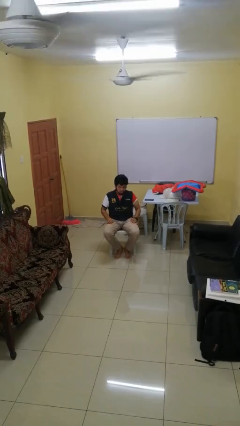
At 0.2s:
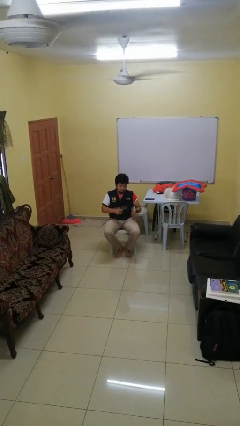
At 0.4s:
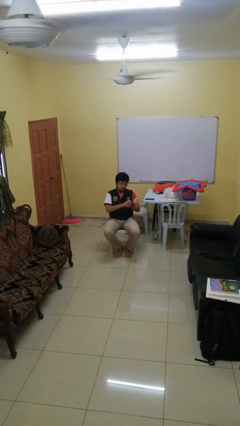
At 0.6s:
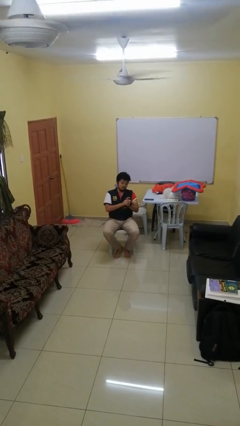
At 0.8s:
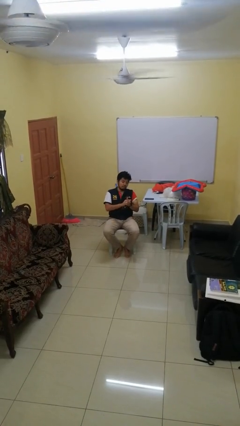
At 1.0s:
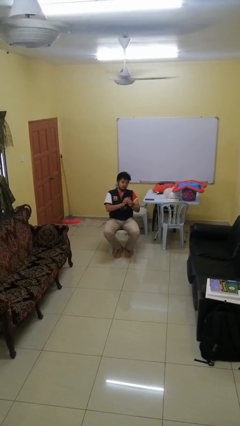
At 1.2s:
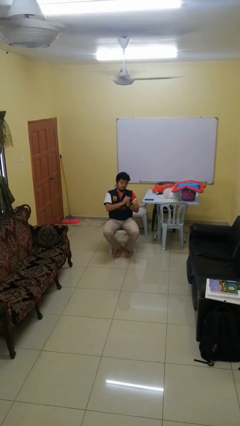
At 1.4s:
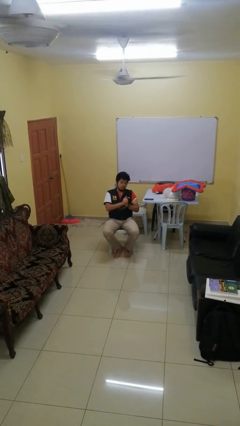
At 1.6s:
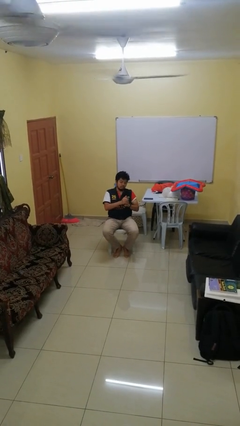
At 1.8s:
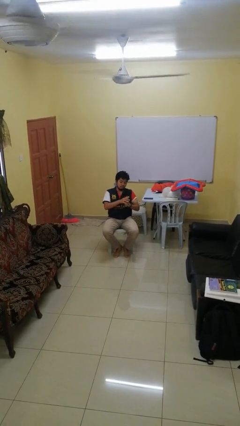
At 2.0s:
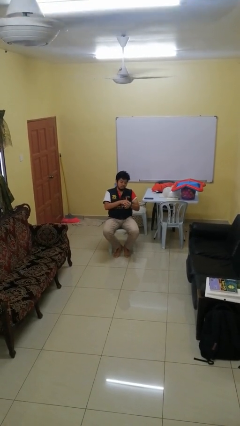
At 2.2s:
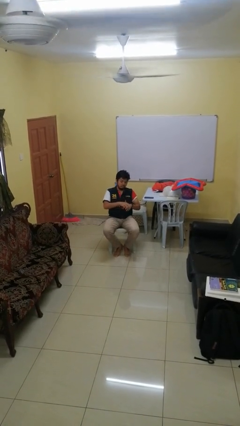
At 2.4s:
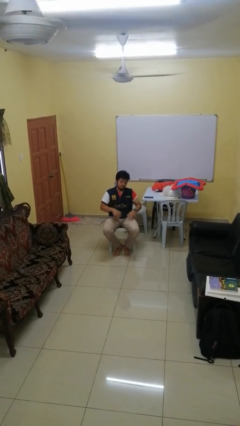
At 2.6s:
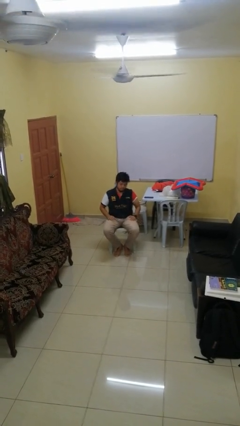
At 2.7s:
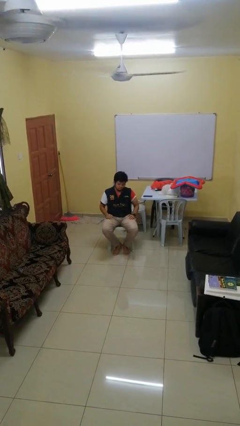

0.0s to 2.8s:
person cracks knuckles

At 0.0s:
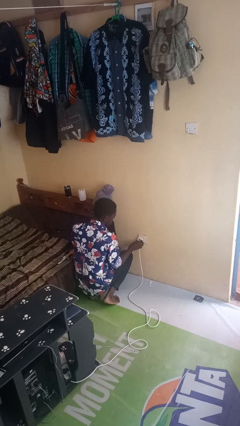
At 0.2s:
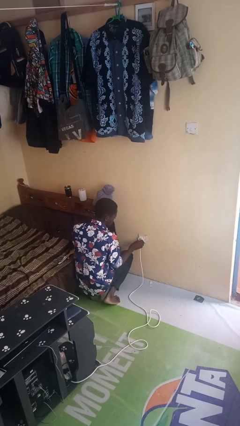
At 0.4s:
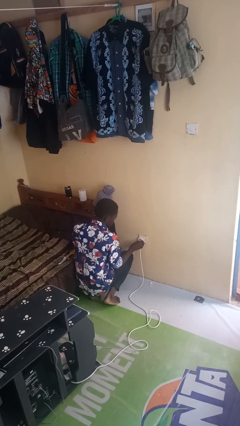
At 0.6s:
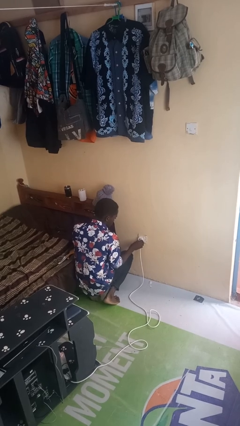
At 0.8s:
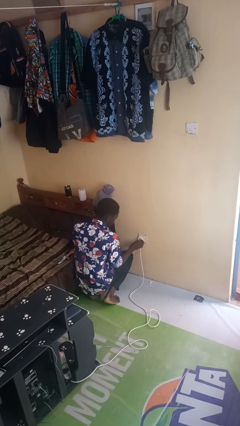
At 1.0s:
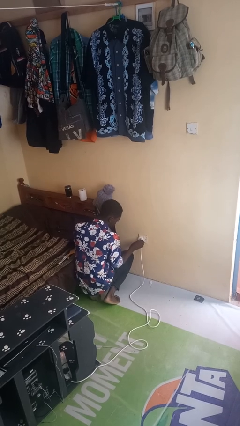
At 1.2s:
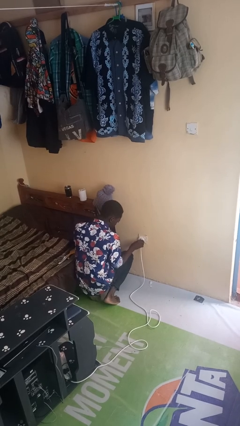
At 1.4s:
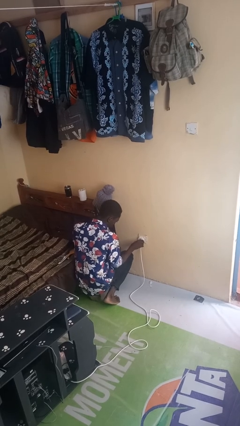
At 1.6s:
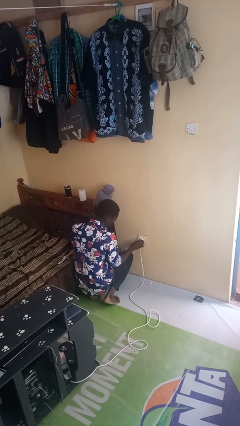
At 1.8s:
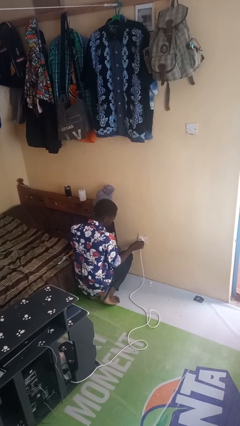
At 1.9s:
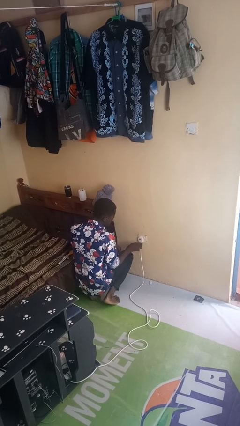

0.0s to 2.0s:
person plugs into electrical socket

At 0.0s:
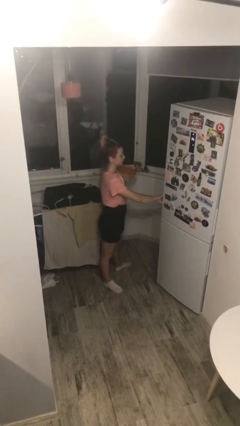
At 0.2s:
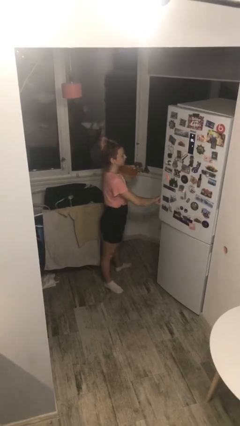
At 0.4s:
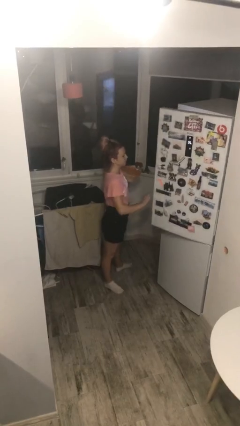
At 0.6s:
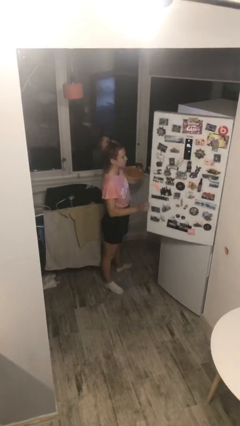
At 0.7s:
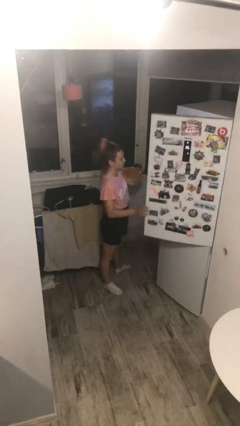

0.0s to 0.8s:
person opens refrigerator

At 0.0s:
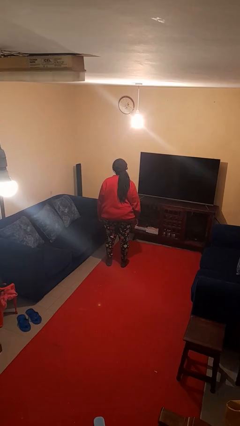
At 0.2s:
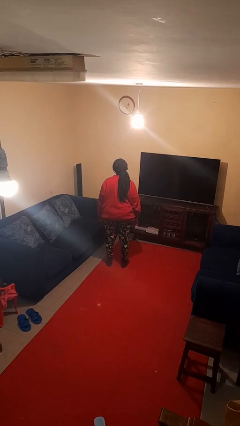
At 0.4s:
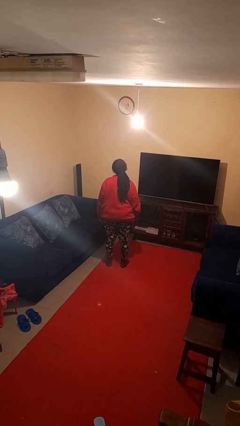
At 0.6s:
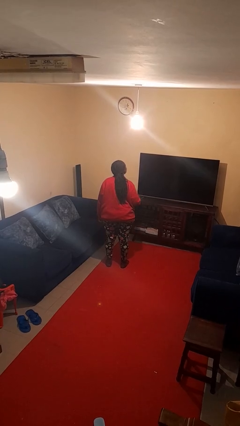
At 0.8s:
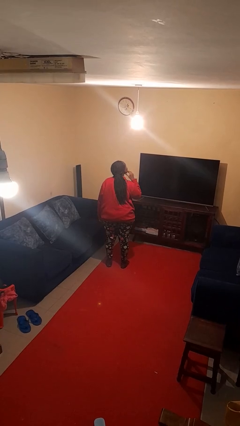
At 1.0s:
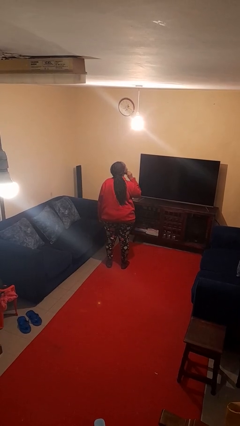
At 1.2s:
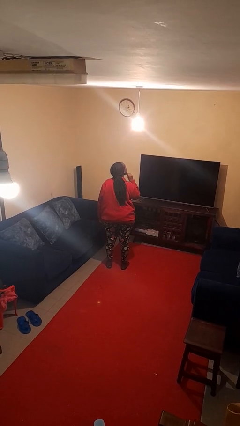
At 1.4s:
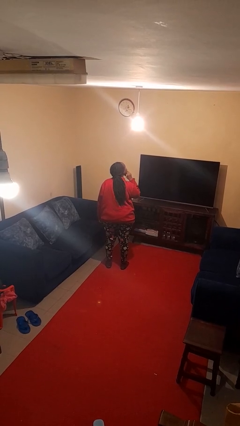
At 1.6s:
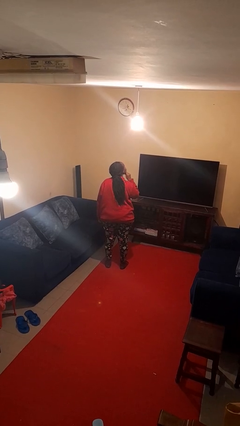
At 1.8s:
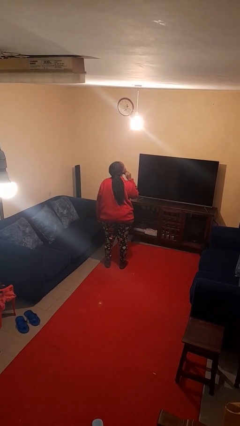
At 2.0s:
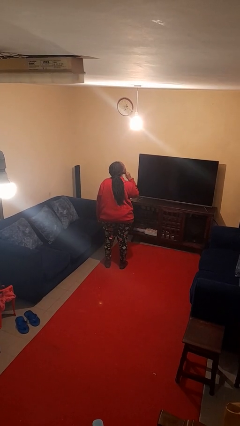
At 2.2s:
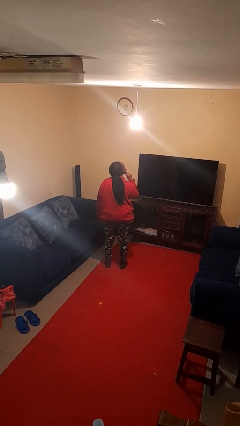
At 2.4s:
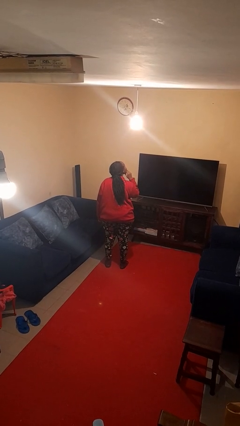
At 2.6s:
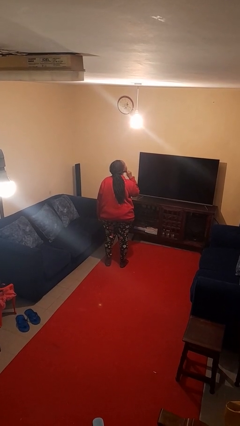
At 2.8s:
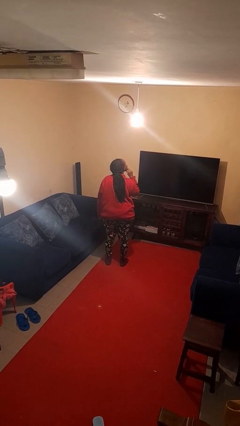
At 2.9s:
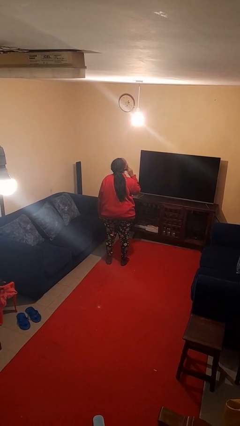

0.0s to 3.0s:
person strokes chin

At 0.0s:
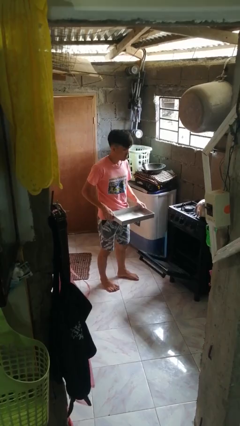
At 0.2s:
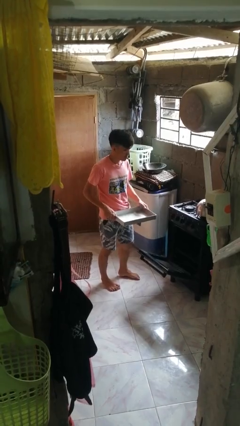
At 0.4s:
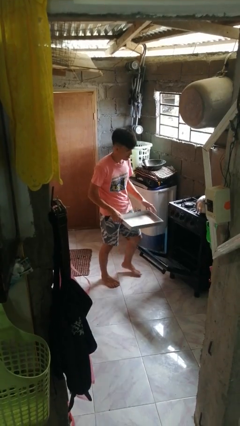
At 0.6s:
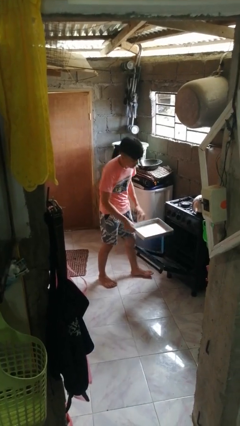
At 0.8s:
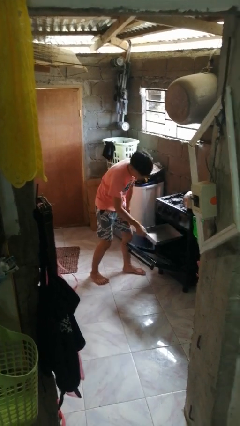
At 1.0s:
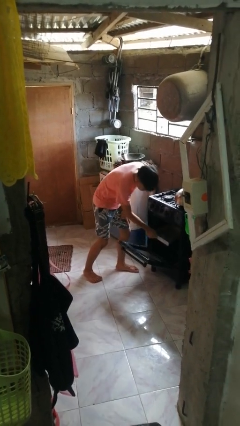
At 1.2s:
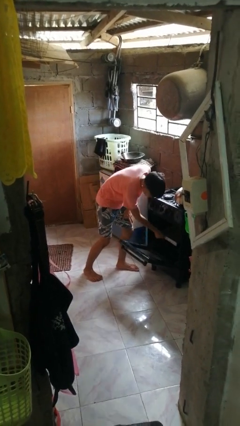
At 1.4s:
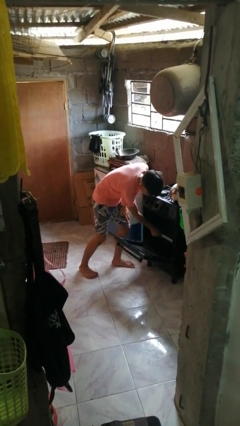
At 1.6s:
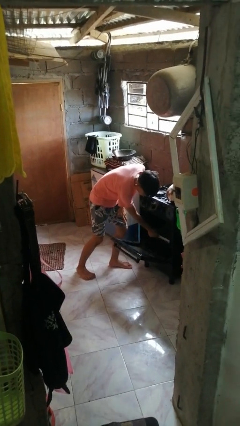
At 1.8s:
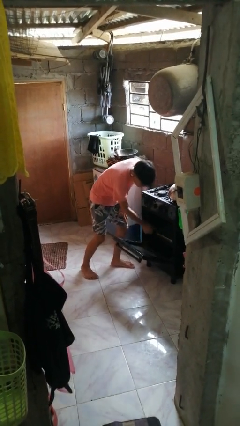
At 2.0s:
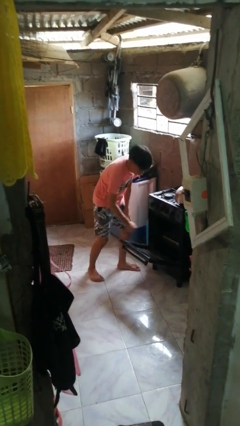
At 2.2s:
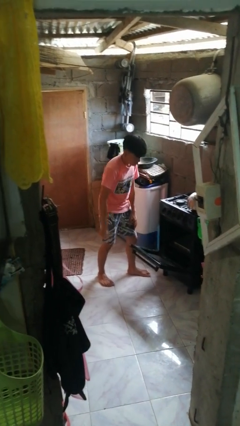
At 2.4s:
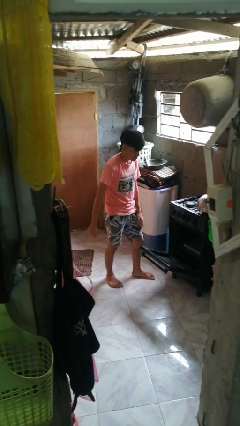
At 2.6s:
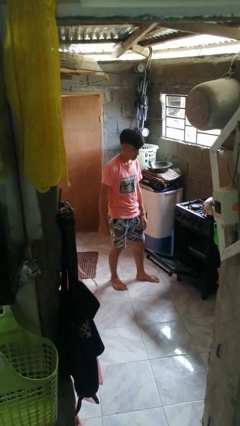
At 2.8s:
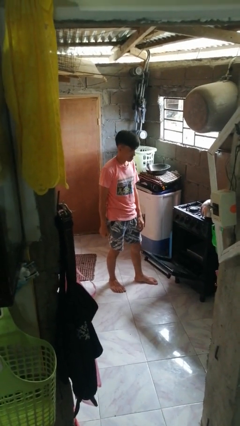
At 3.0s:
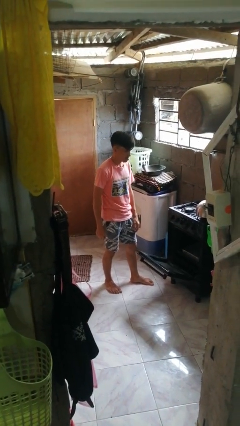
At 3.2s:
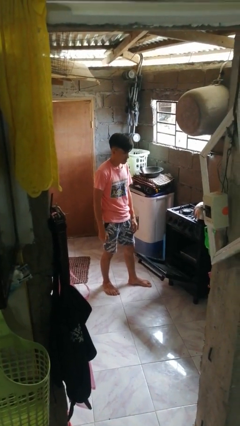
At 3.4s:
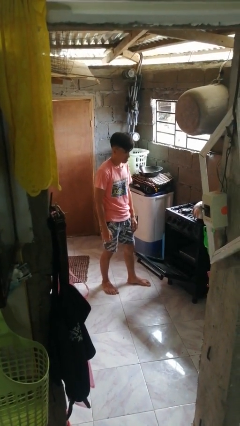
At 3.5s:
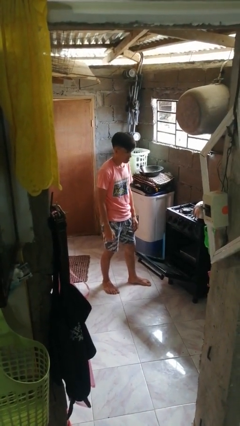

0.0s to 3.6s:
person puts object into oven

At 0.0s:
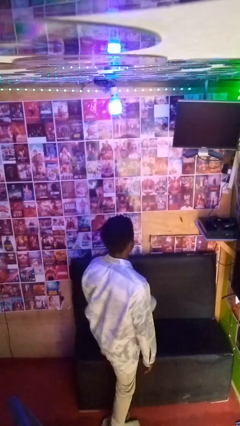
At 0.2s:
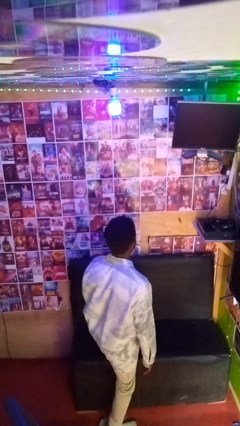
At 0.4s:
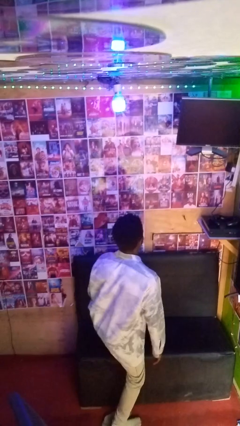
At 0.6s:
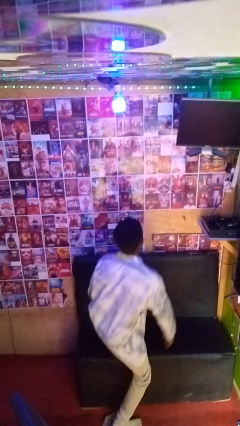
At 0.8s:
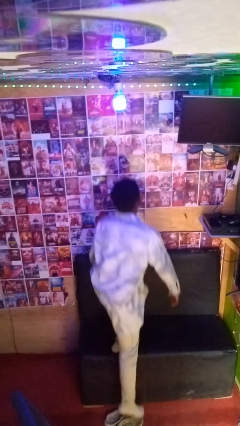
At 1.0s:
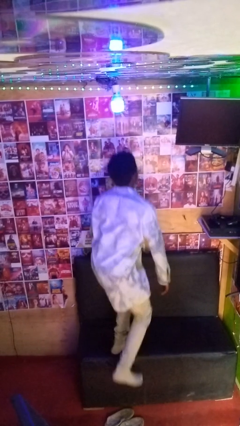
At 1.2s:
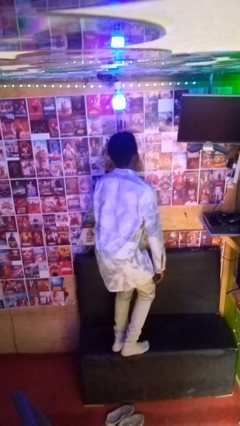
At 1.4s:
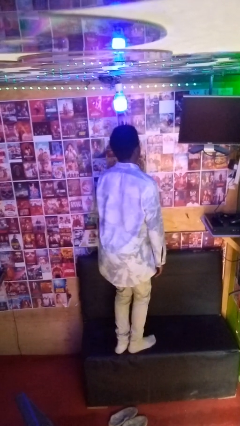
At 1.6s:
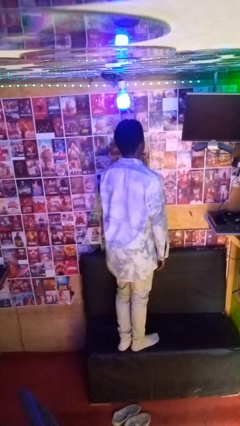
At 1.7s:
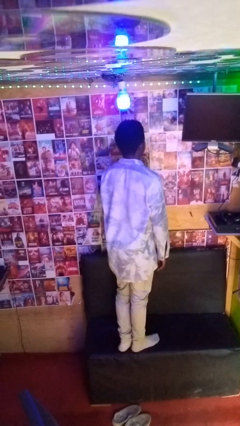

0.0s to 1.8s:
person climbs on couch

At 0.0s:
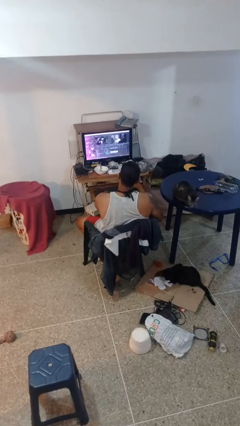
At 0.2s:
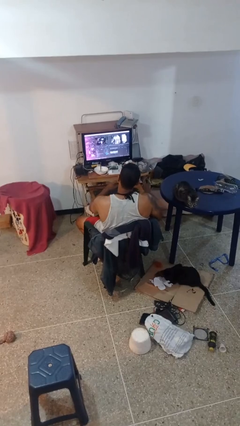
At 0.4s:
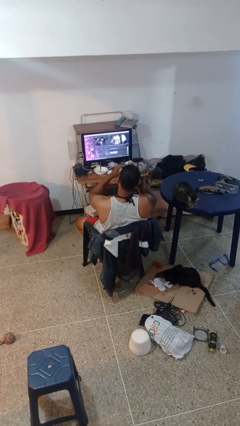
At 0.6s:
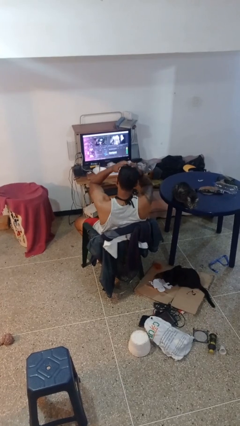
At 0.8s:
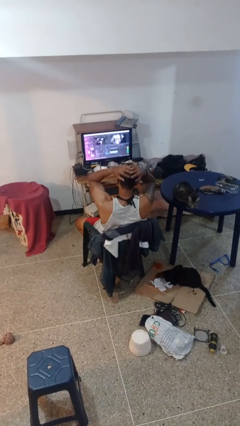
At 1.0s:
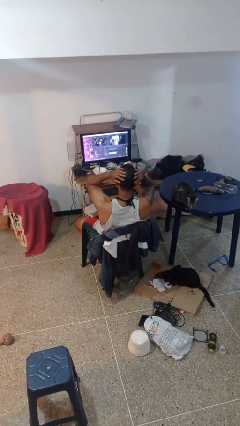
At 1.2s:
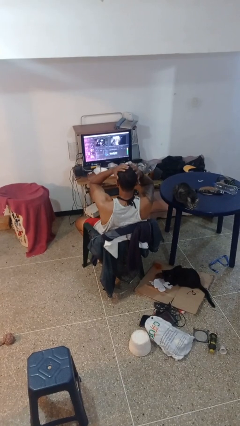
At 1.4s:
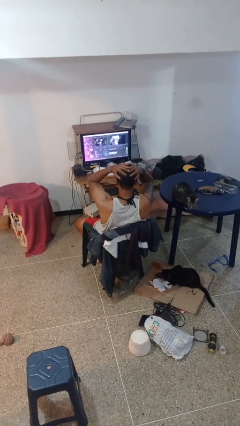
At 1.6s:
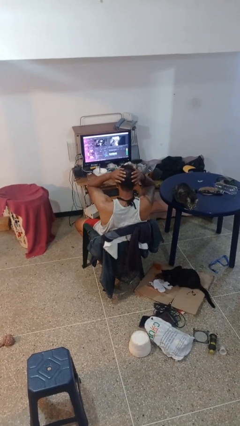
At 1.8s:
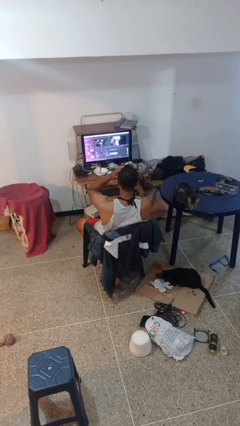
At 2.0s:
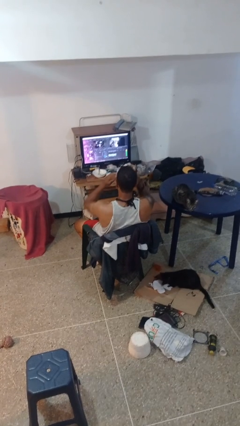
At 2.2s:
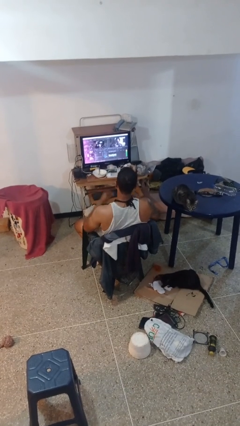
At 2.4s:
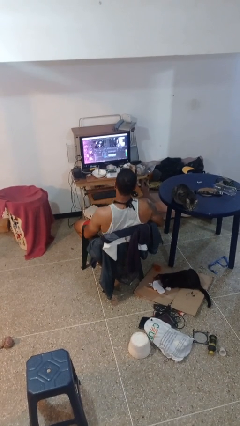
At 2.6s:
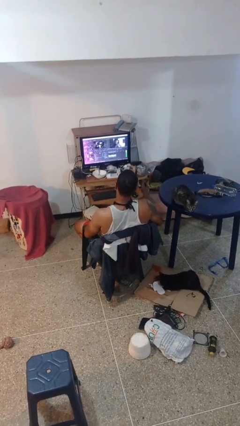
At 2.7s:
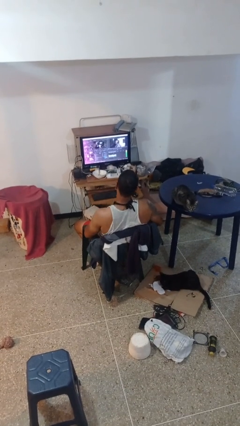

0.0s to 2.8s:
person strokes hair
